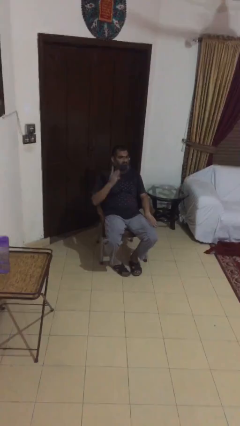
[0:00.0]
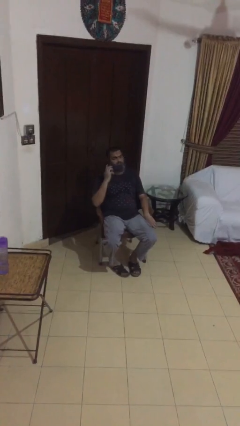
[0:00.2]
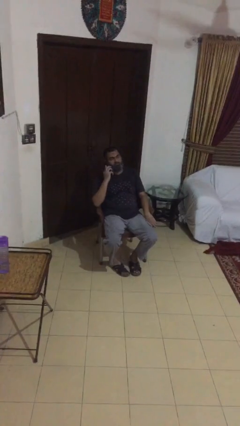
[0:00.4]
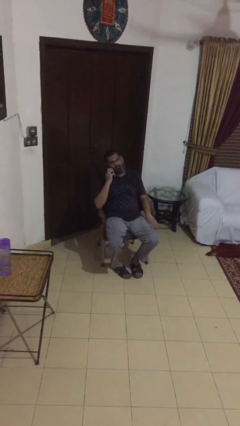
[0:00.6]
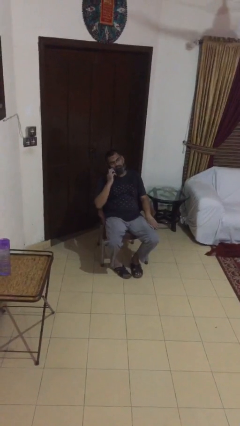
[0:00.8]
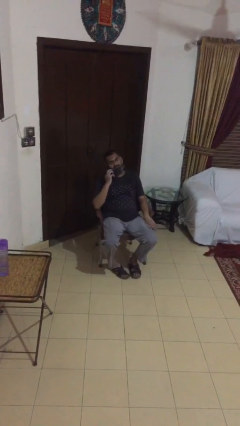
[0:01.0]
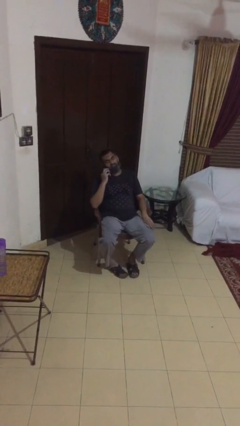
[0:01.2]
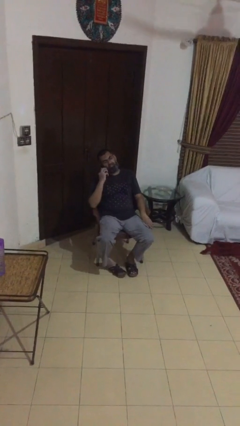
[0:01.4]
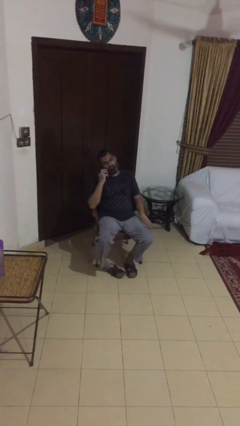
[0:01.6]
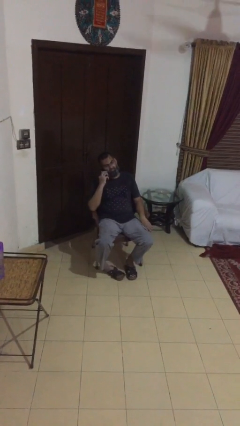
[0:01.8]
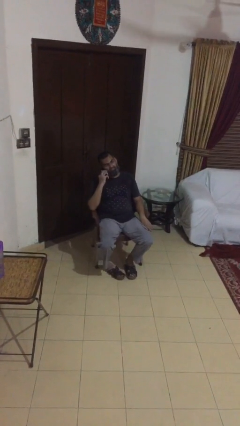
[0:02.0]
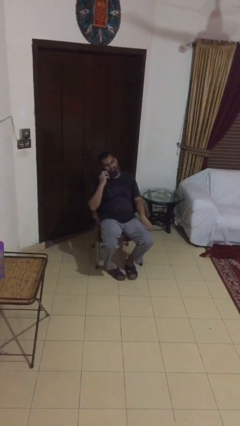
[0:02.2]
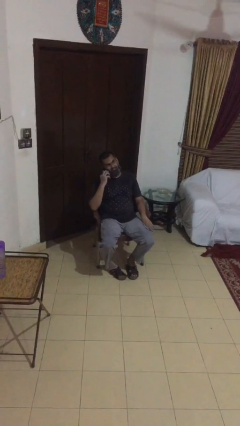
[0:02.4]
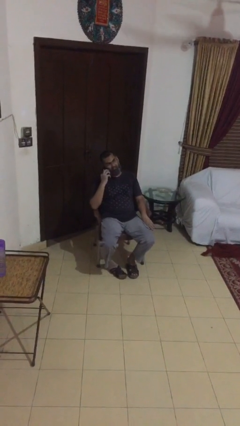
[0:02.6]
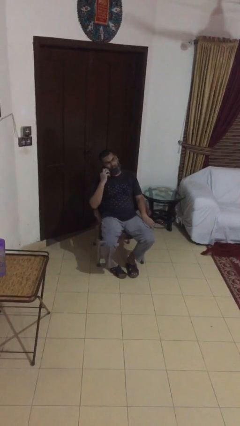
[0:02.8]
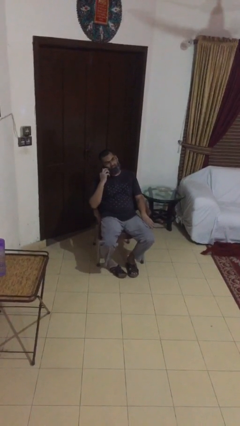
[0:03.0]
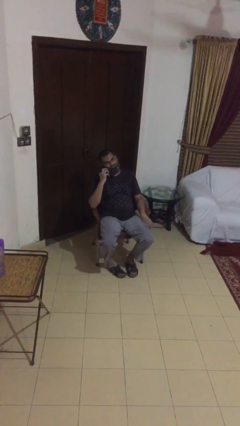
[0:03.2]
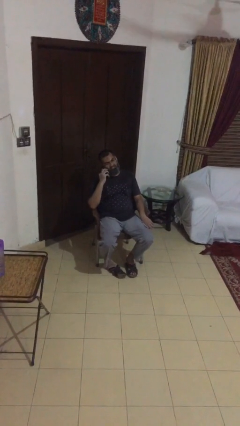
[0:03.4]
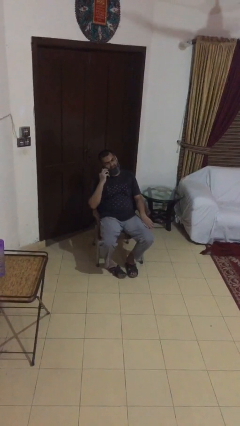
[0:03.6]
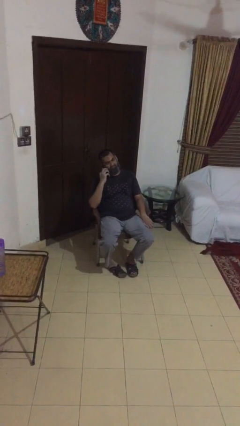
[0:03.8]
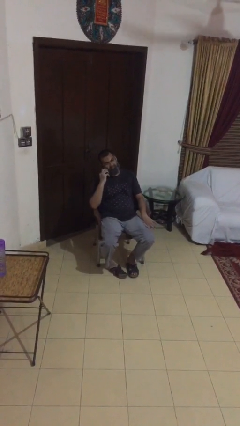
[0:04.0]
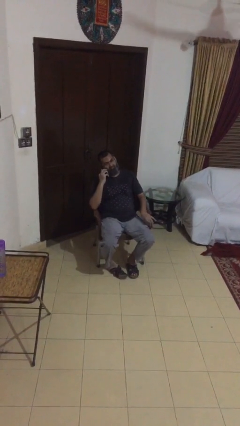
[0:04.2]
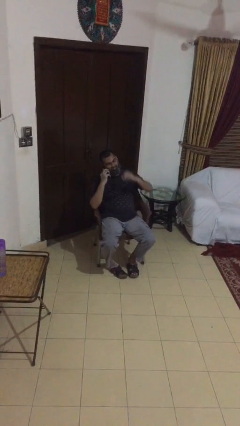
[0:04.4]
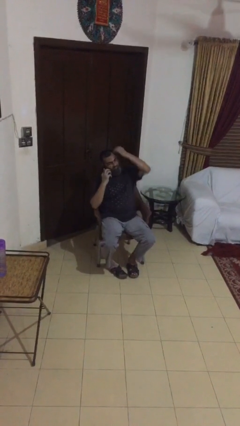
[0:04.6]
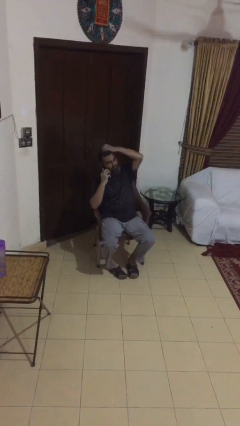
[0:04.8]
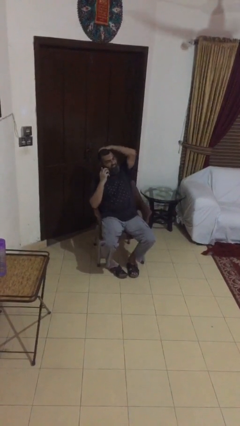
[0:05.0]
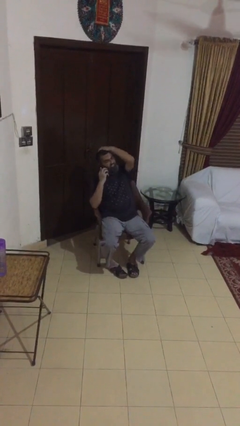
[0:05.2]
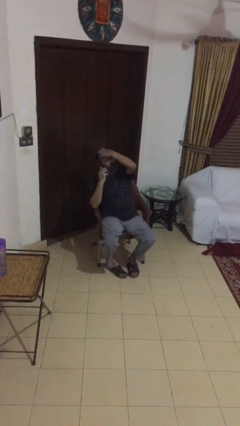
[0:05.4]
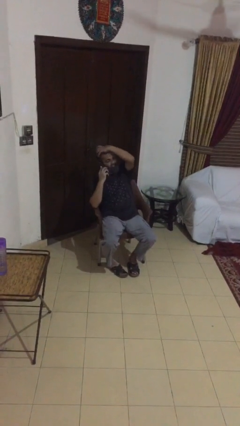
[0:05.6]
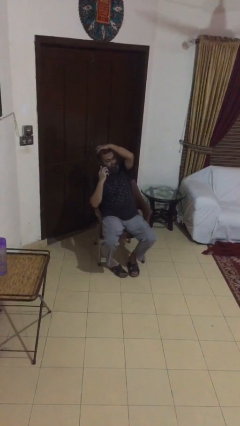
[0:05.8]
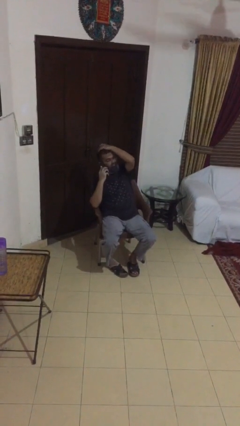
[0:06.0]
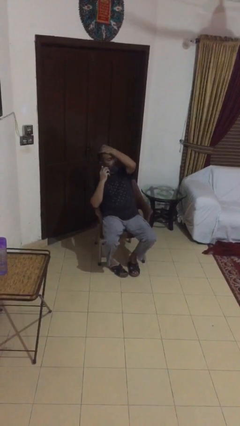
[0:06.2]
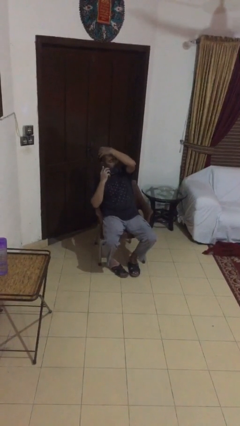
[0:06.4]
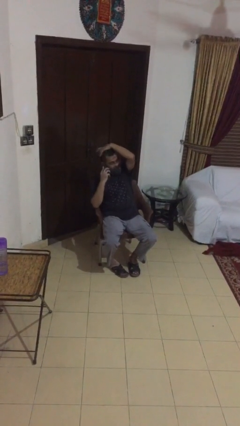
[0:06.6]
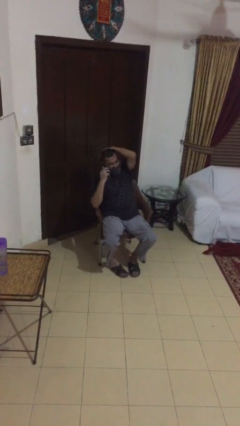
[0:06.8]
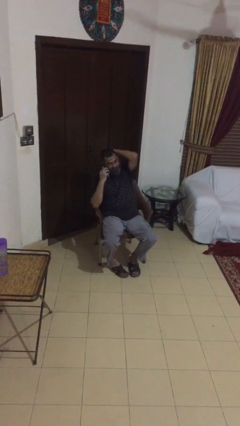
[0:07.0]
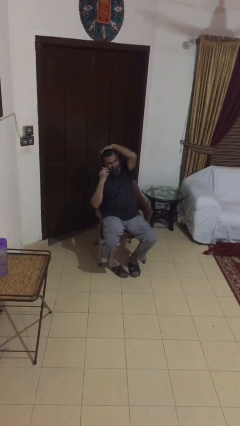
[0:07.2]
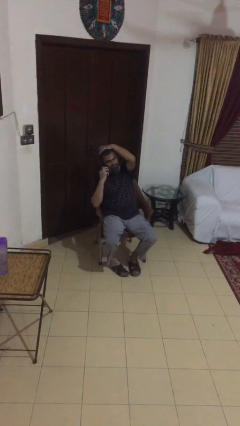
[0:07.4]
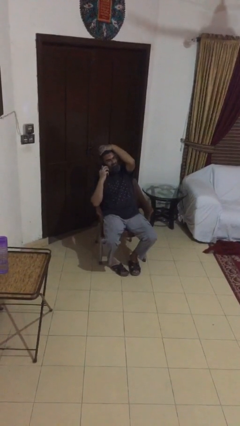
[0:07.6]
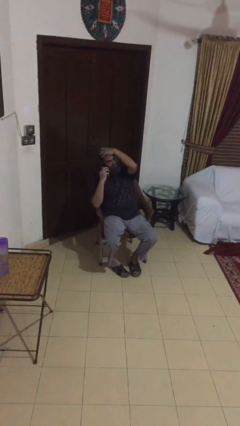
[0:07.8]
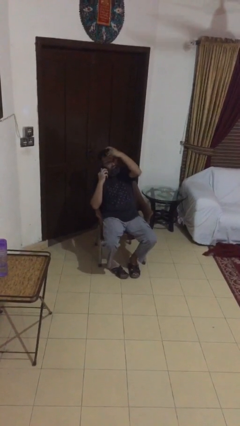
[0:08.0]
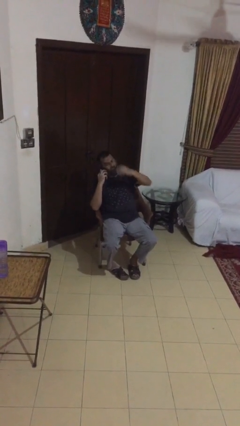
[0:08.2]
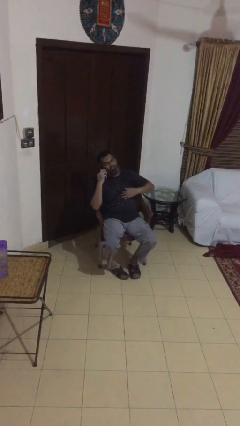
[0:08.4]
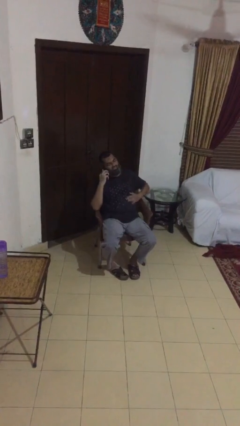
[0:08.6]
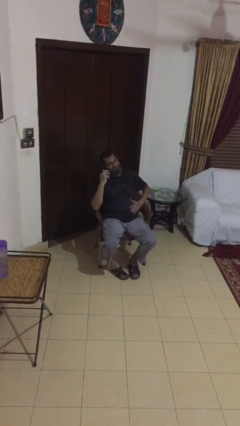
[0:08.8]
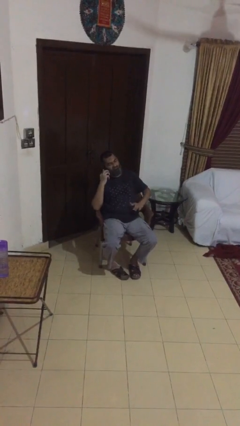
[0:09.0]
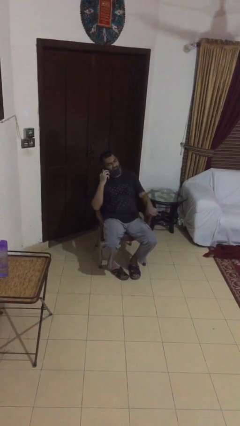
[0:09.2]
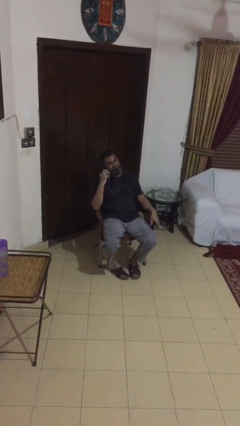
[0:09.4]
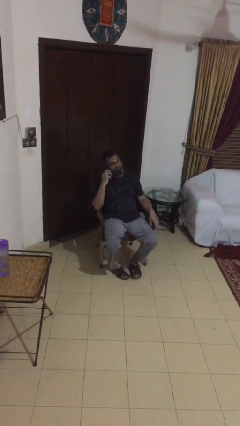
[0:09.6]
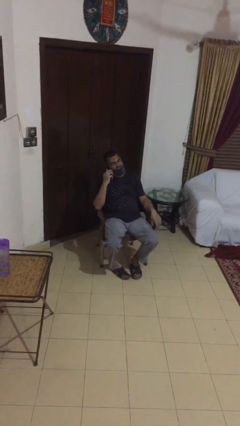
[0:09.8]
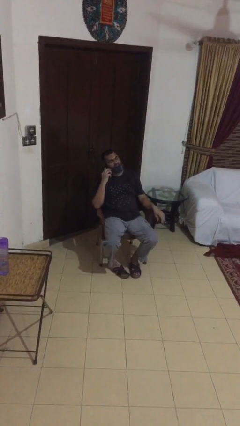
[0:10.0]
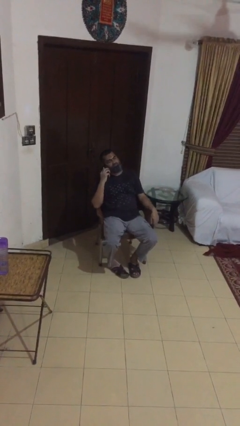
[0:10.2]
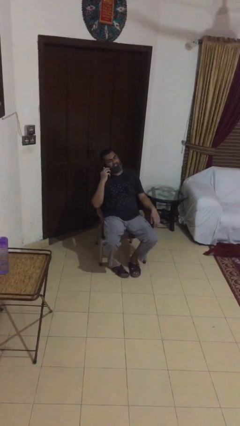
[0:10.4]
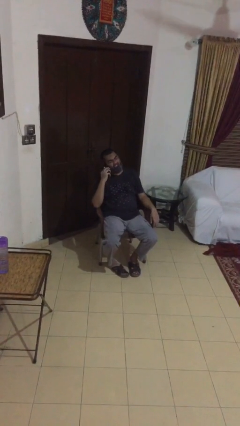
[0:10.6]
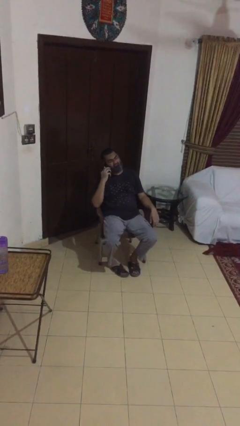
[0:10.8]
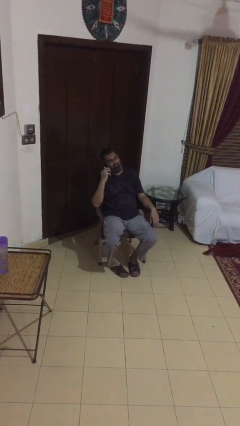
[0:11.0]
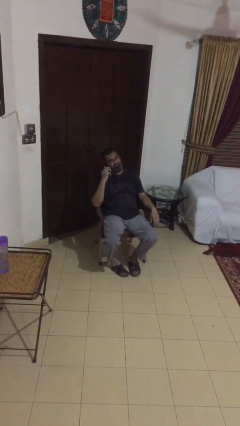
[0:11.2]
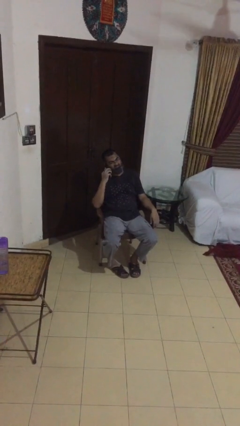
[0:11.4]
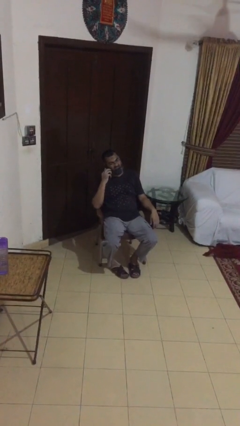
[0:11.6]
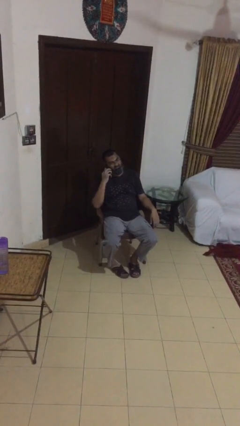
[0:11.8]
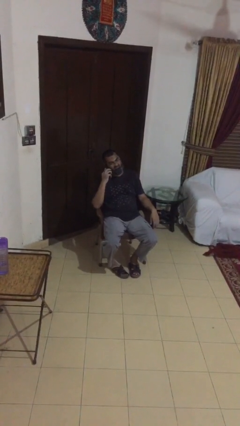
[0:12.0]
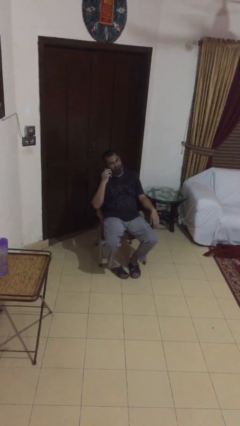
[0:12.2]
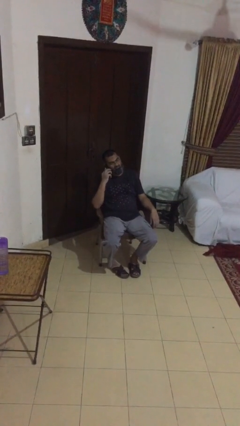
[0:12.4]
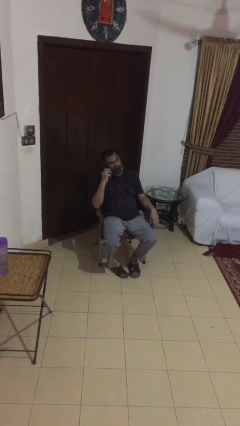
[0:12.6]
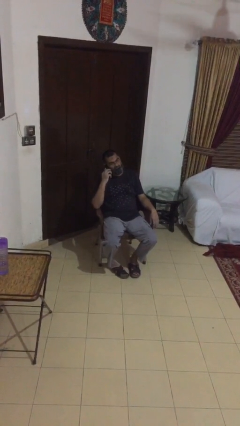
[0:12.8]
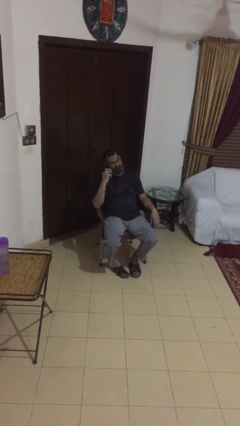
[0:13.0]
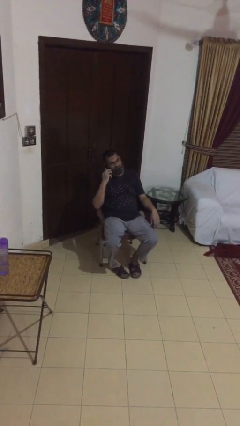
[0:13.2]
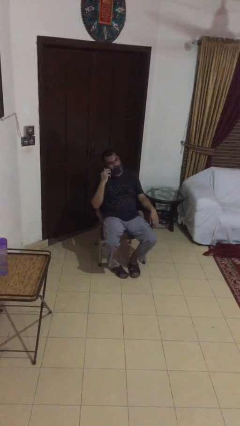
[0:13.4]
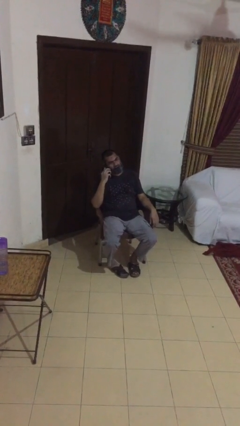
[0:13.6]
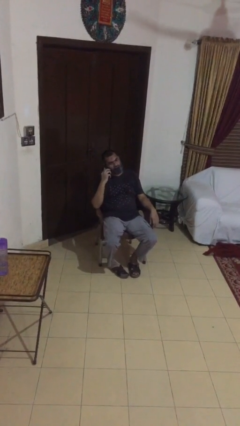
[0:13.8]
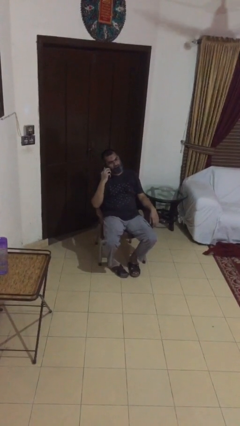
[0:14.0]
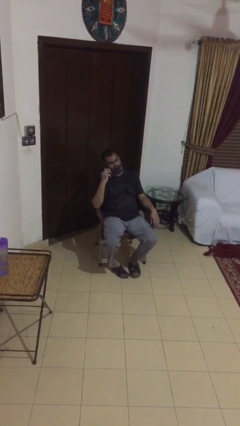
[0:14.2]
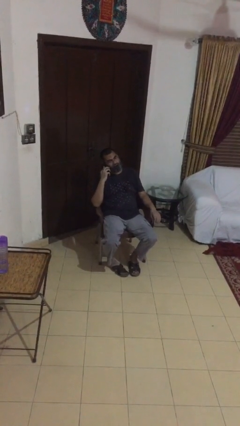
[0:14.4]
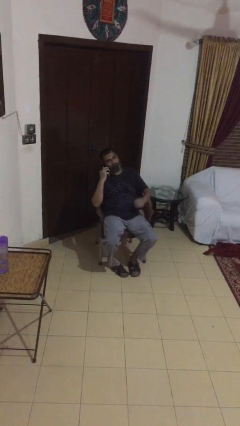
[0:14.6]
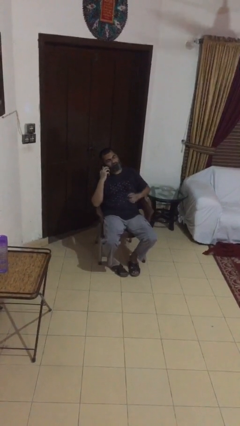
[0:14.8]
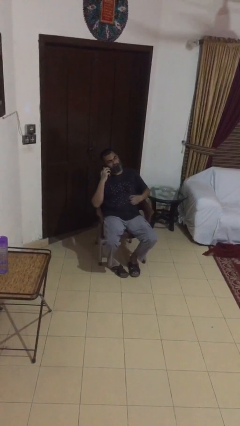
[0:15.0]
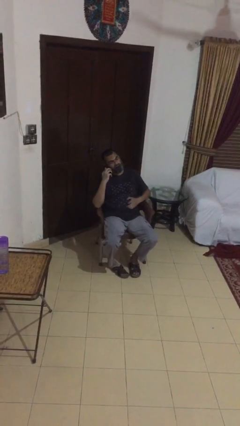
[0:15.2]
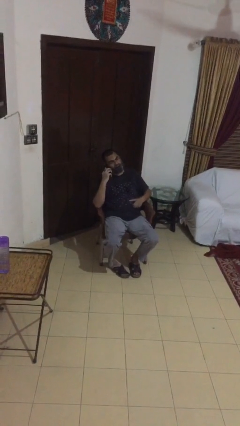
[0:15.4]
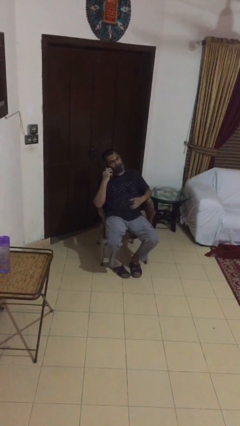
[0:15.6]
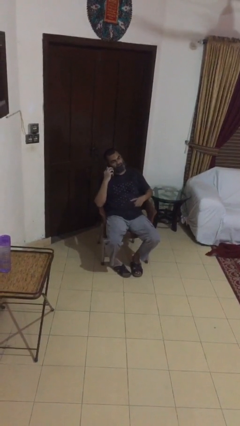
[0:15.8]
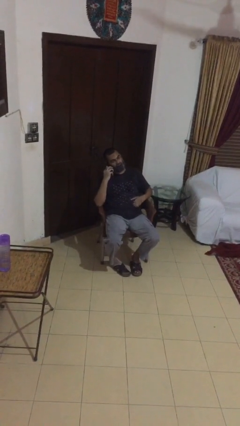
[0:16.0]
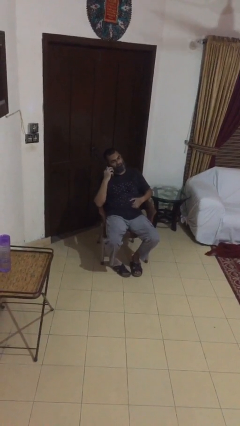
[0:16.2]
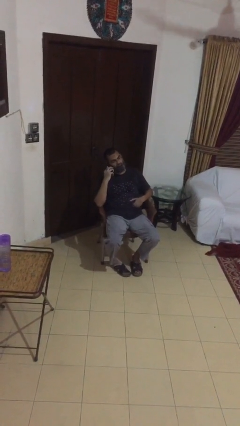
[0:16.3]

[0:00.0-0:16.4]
person talks on phone

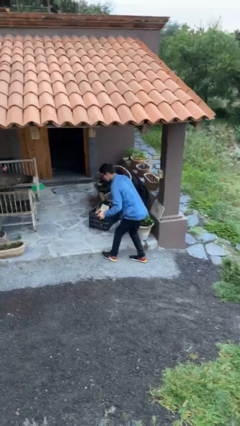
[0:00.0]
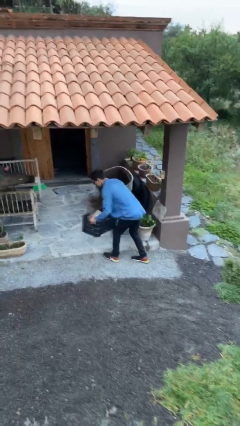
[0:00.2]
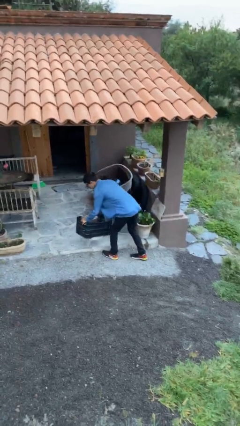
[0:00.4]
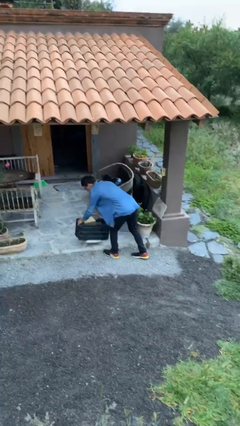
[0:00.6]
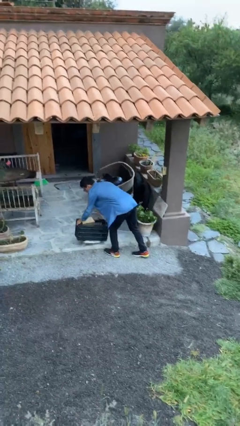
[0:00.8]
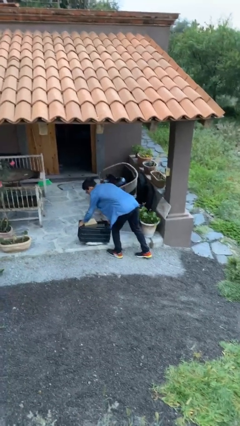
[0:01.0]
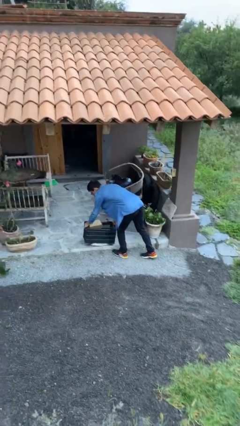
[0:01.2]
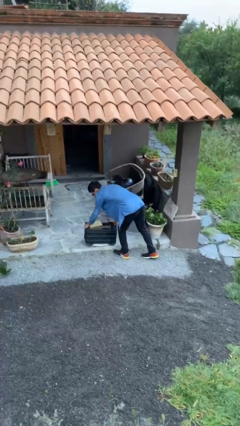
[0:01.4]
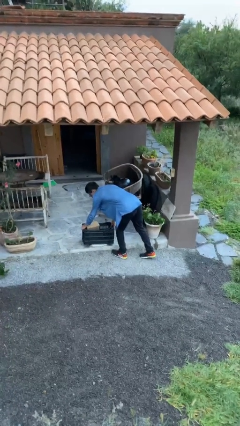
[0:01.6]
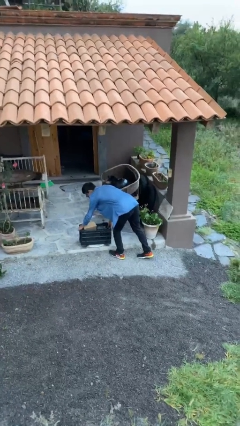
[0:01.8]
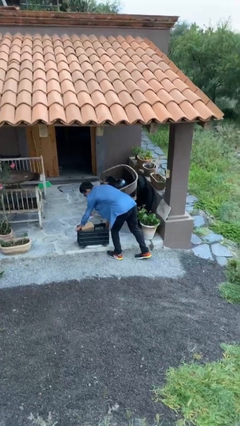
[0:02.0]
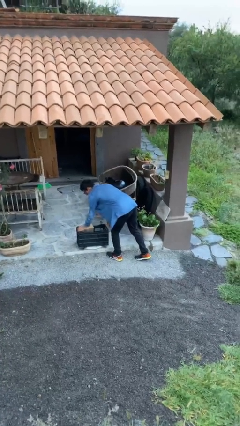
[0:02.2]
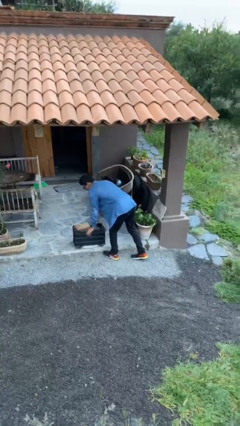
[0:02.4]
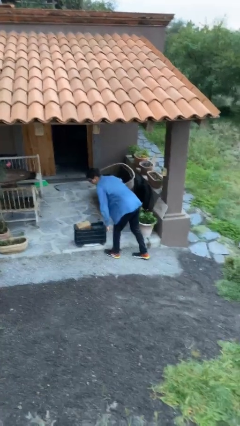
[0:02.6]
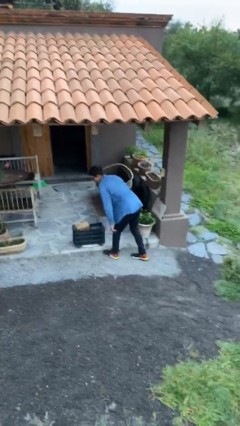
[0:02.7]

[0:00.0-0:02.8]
person puts down object on floor
